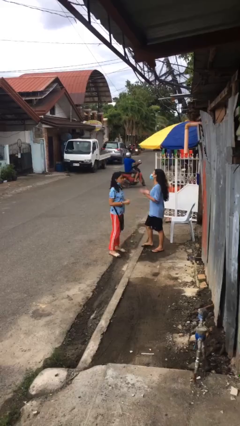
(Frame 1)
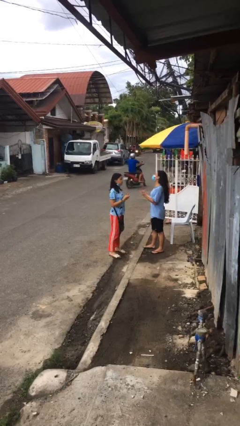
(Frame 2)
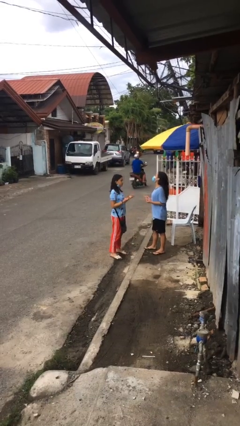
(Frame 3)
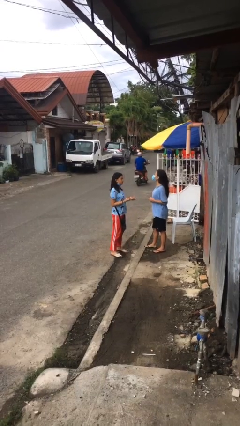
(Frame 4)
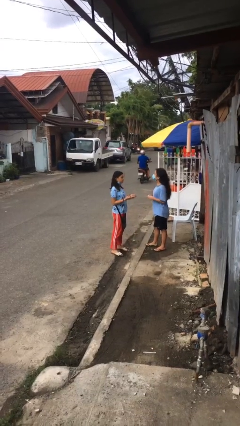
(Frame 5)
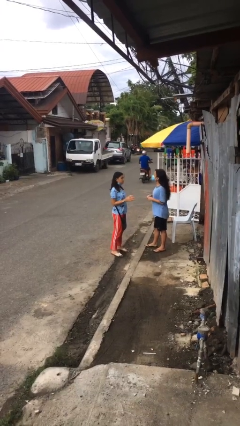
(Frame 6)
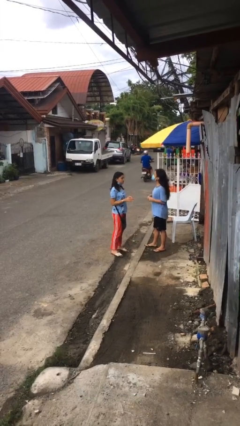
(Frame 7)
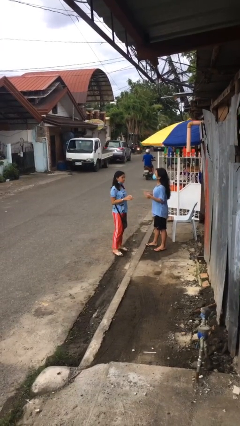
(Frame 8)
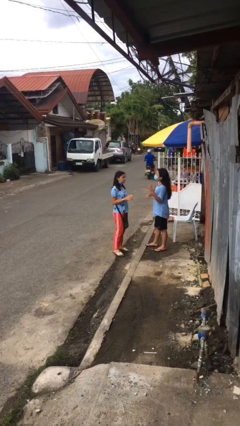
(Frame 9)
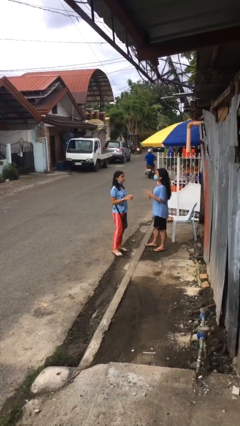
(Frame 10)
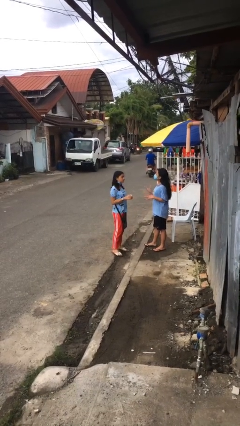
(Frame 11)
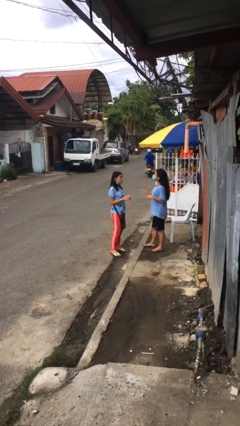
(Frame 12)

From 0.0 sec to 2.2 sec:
person talks to person

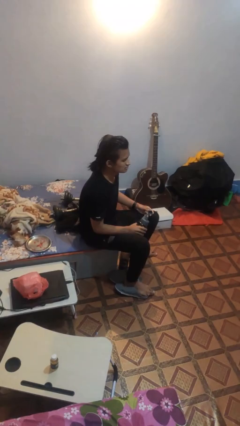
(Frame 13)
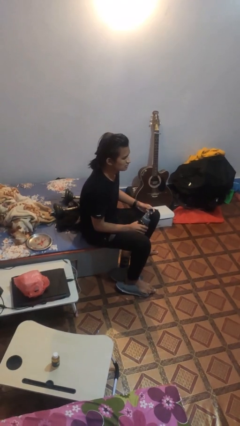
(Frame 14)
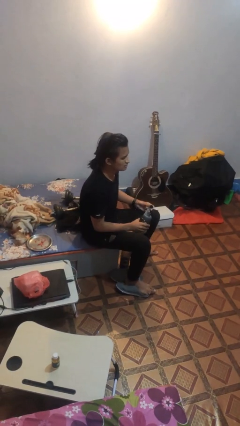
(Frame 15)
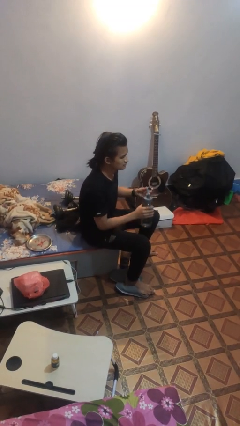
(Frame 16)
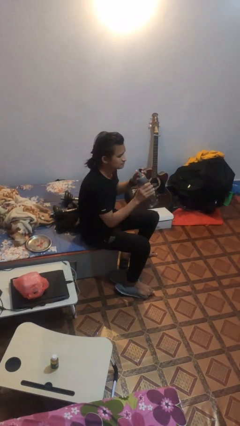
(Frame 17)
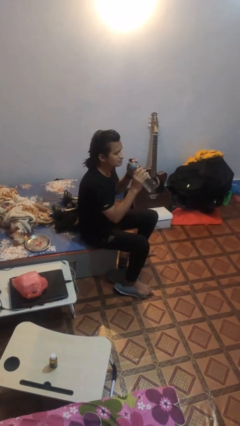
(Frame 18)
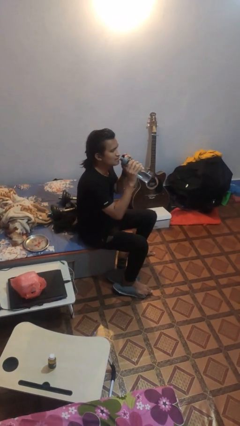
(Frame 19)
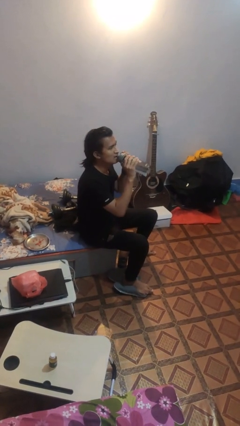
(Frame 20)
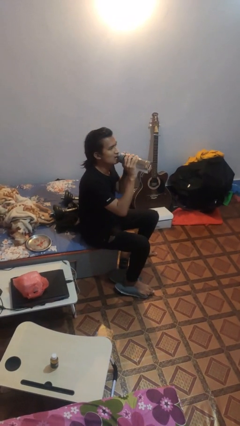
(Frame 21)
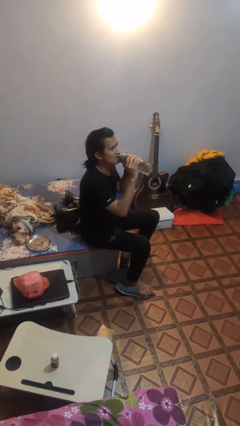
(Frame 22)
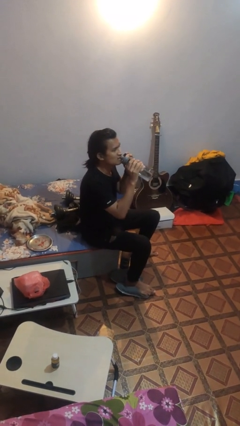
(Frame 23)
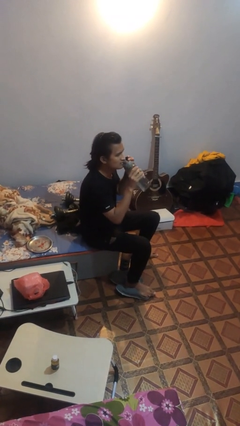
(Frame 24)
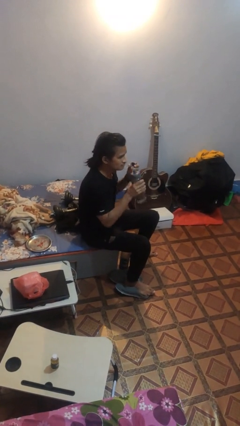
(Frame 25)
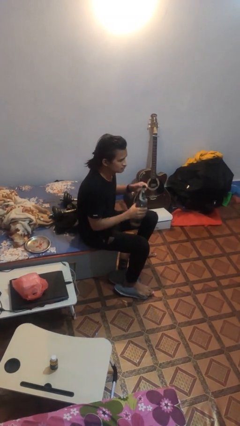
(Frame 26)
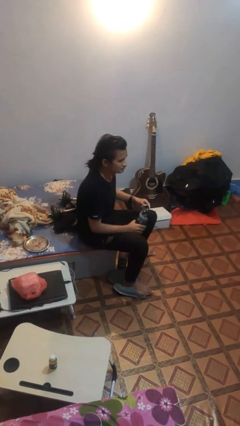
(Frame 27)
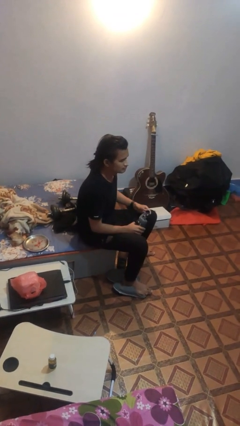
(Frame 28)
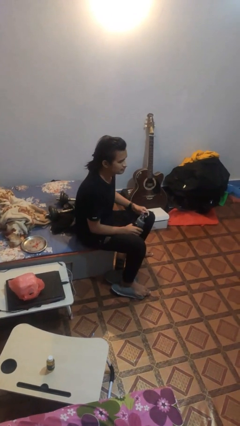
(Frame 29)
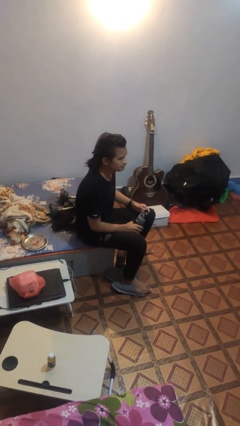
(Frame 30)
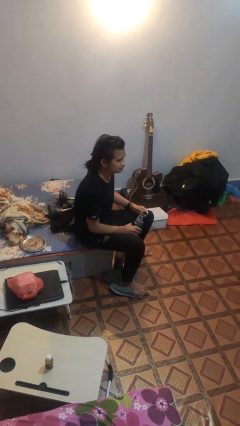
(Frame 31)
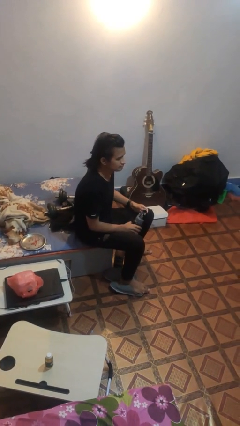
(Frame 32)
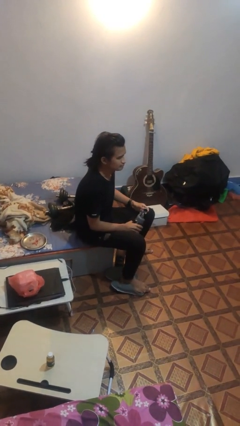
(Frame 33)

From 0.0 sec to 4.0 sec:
person drinks from bottle

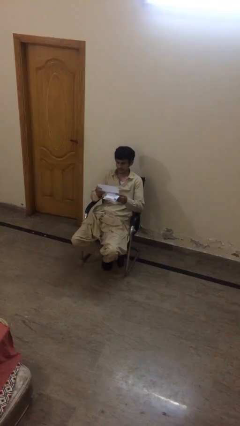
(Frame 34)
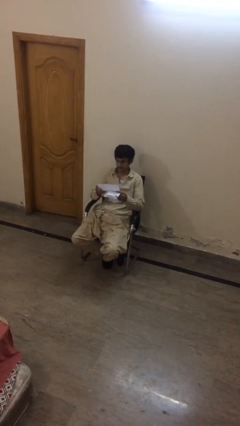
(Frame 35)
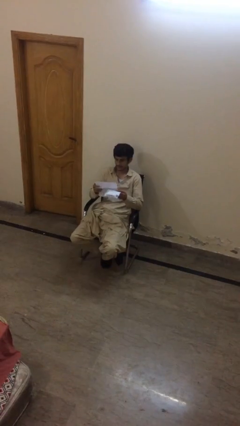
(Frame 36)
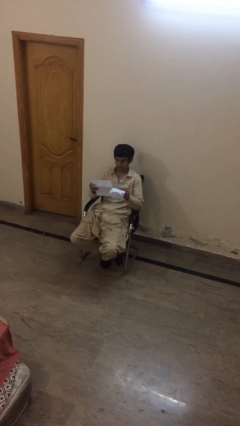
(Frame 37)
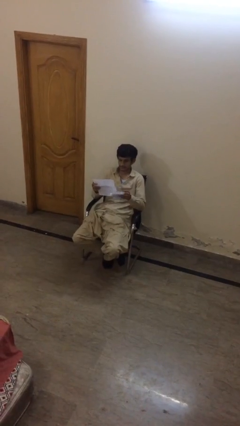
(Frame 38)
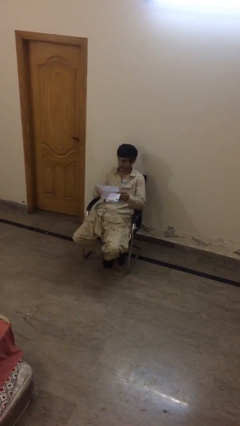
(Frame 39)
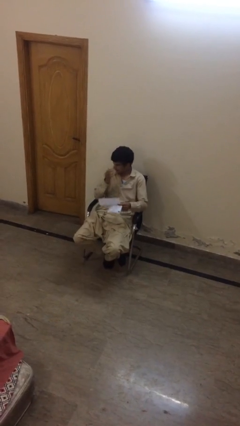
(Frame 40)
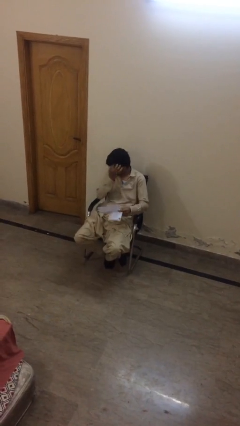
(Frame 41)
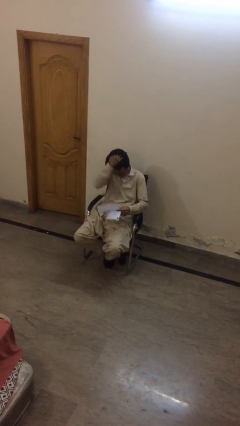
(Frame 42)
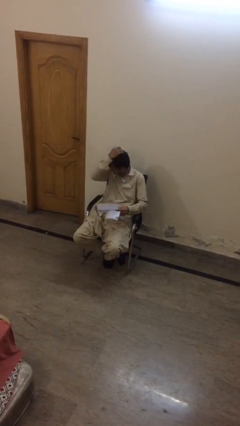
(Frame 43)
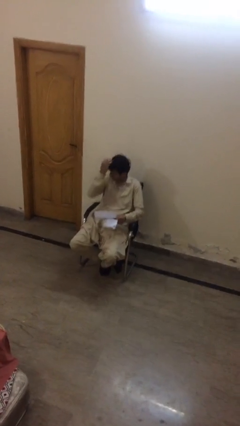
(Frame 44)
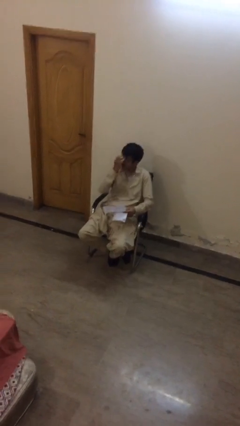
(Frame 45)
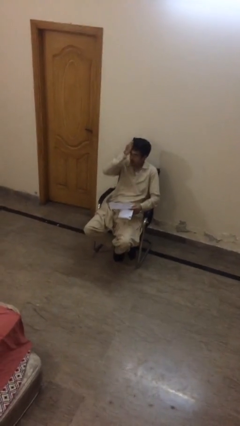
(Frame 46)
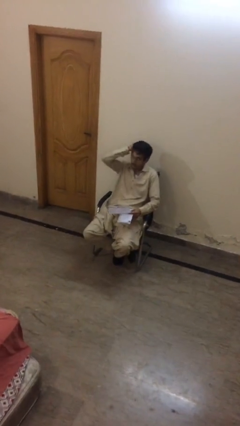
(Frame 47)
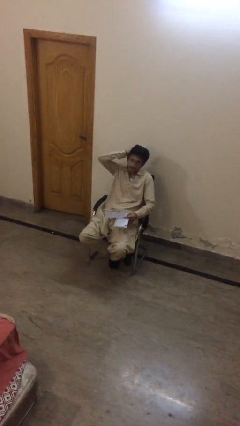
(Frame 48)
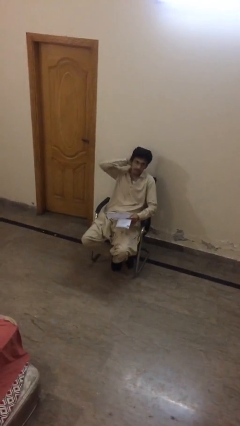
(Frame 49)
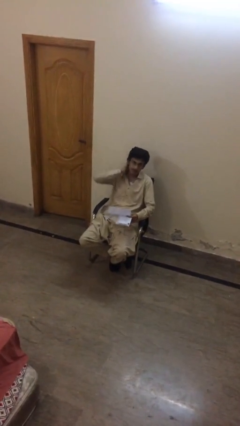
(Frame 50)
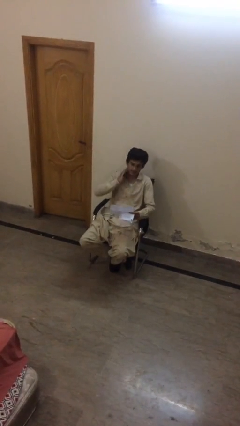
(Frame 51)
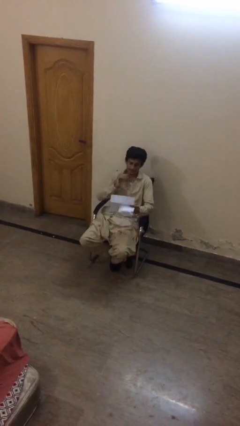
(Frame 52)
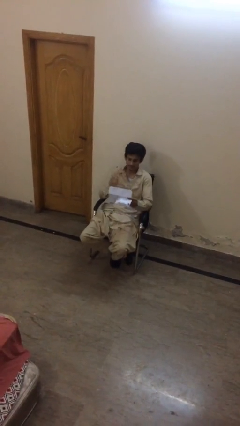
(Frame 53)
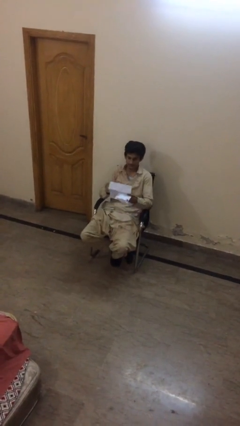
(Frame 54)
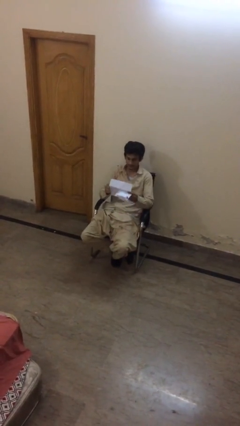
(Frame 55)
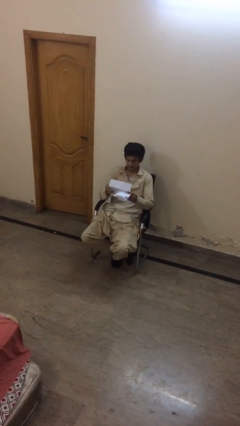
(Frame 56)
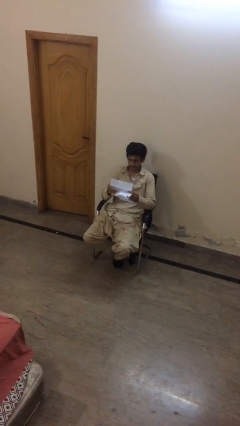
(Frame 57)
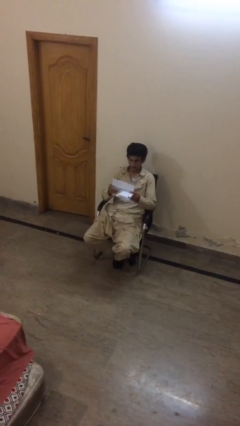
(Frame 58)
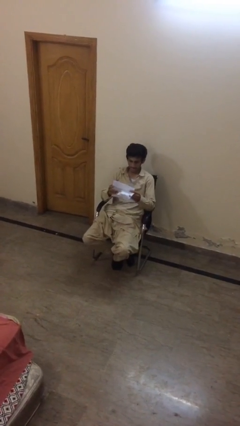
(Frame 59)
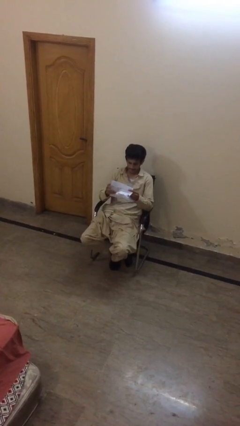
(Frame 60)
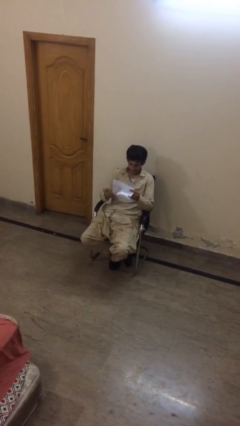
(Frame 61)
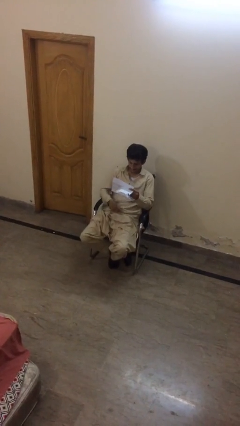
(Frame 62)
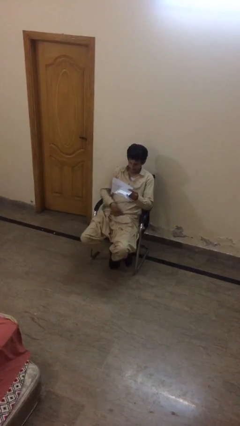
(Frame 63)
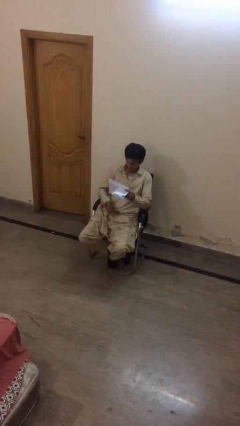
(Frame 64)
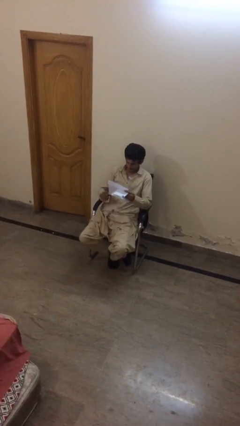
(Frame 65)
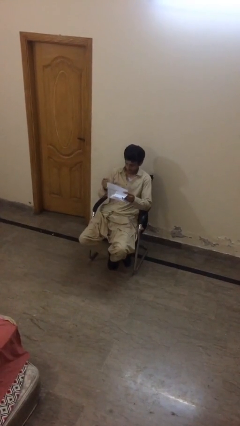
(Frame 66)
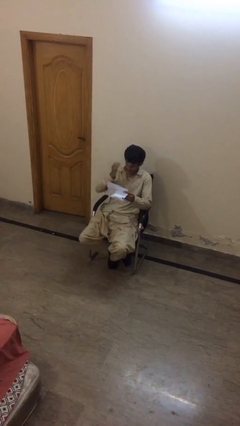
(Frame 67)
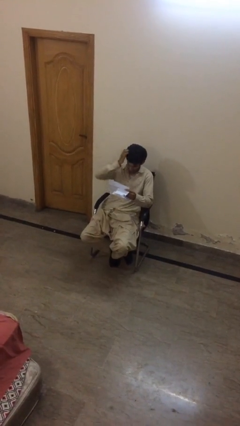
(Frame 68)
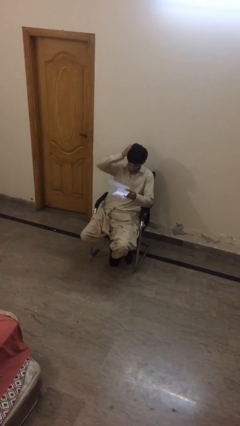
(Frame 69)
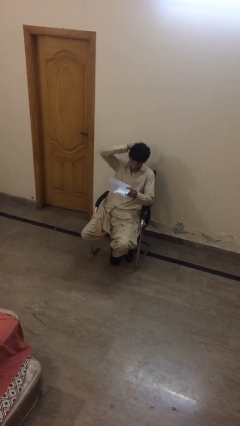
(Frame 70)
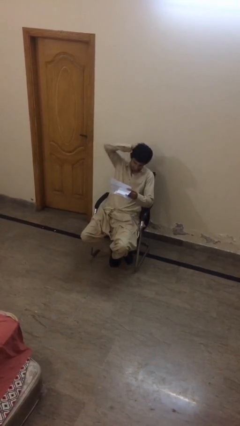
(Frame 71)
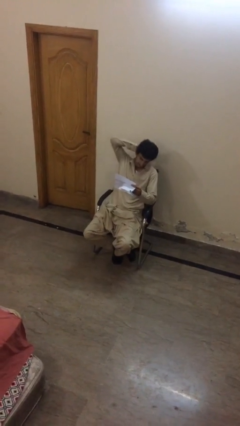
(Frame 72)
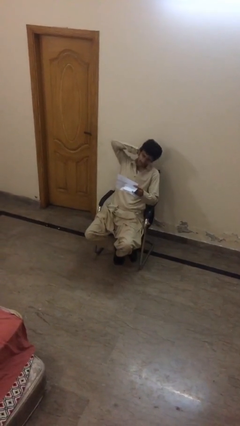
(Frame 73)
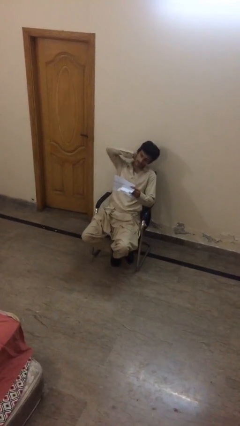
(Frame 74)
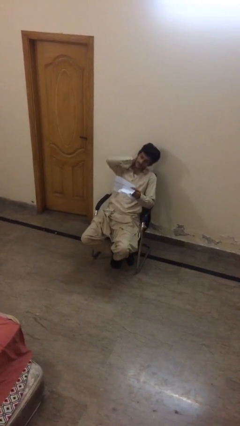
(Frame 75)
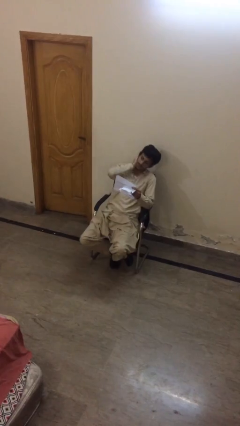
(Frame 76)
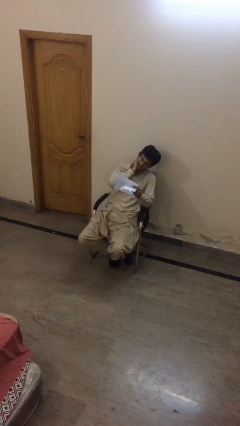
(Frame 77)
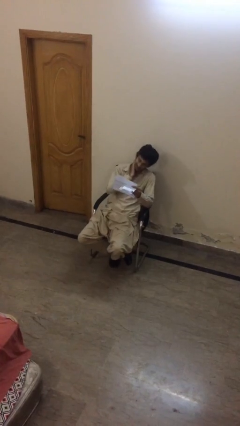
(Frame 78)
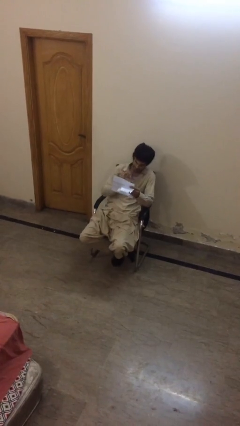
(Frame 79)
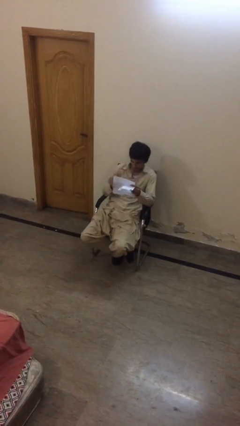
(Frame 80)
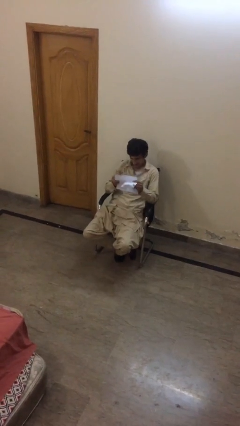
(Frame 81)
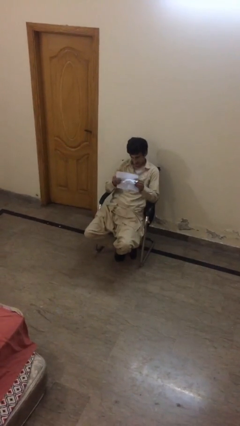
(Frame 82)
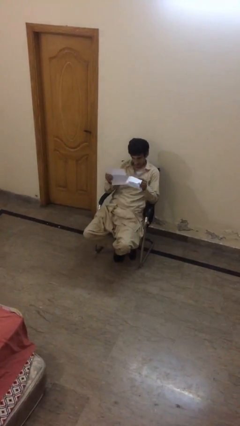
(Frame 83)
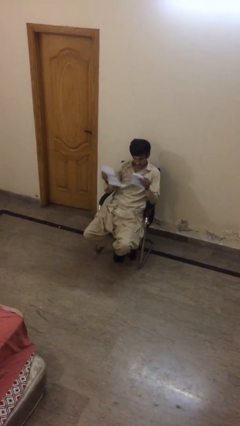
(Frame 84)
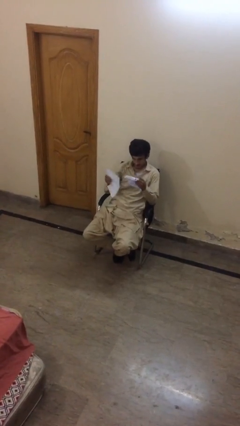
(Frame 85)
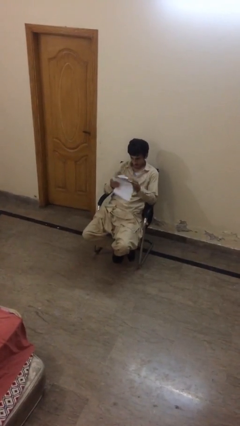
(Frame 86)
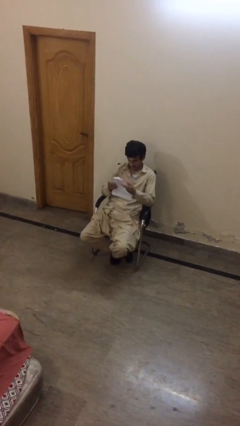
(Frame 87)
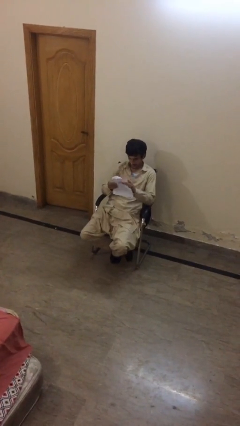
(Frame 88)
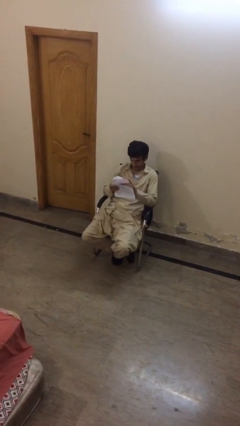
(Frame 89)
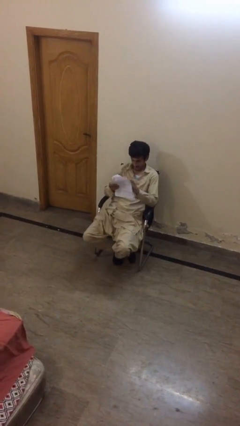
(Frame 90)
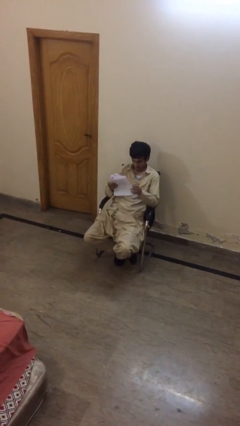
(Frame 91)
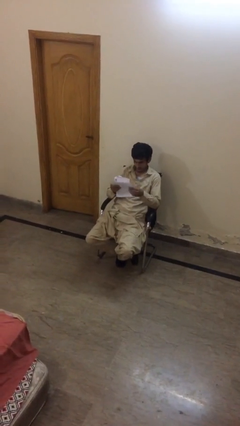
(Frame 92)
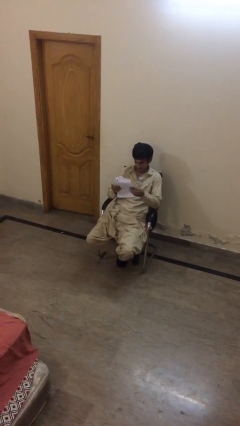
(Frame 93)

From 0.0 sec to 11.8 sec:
person reads document
